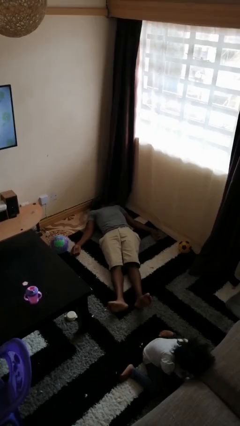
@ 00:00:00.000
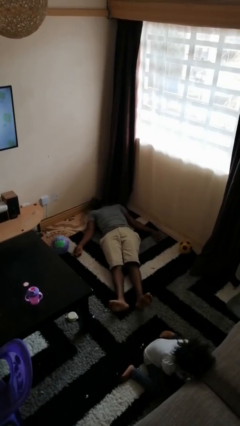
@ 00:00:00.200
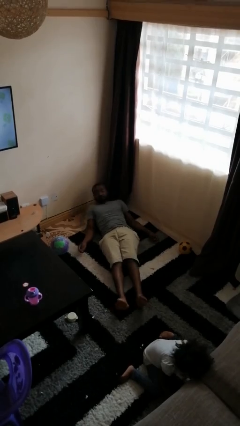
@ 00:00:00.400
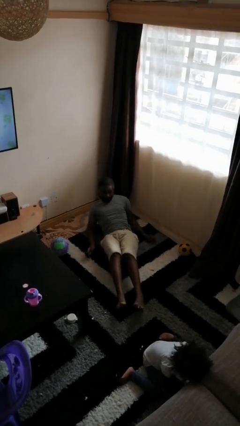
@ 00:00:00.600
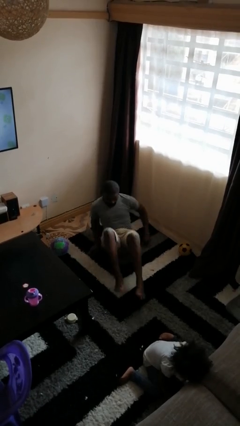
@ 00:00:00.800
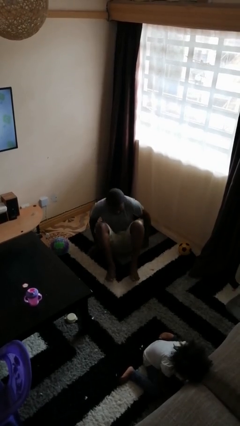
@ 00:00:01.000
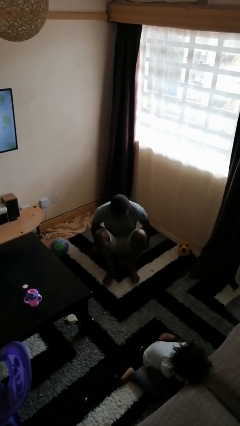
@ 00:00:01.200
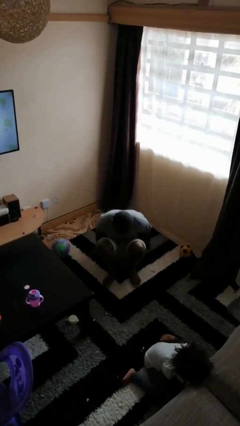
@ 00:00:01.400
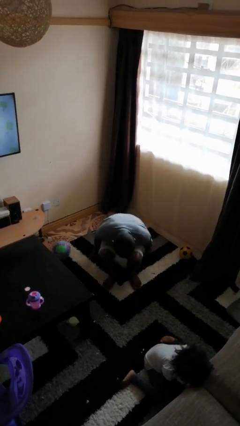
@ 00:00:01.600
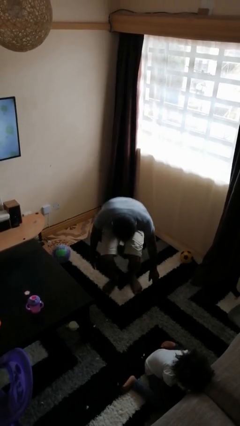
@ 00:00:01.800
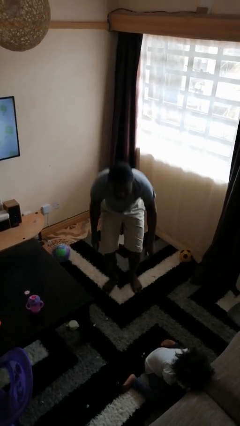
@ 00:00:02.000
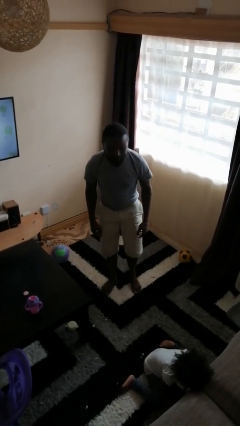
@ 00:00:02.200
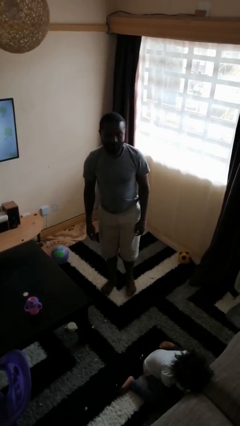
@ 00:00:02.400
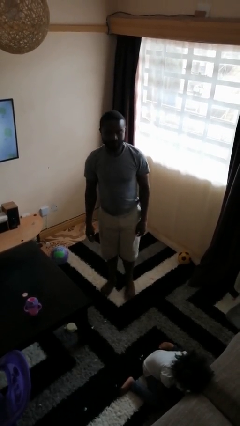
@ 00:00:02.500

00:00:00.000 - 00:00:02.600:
person stands up from floor

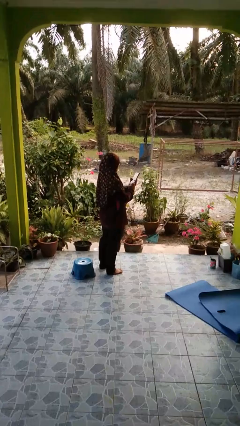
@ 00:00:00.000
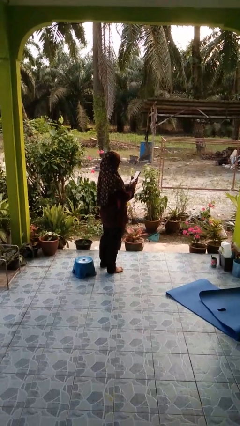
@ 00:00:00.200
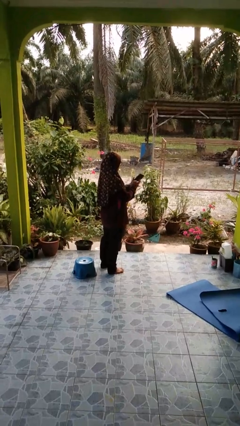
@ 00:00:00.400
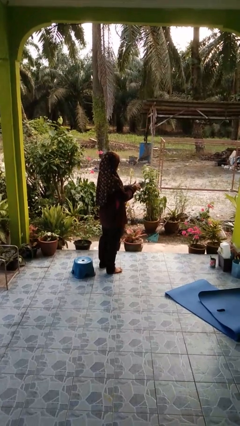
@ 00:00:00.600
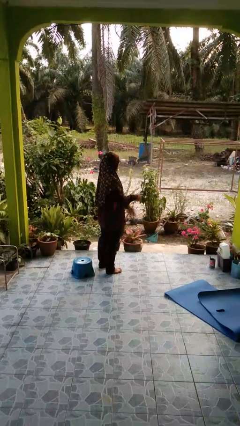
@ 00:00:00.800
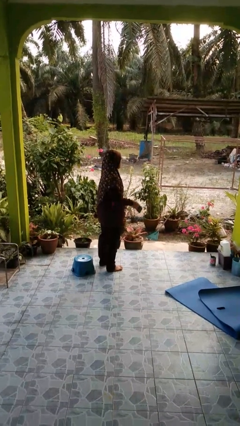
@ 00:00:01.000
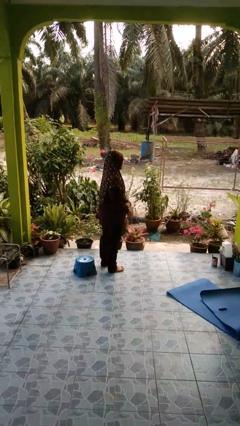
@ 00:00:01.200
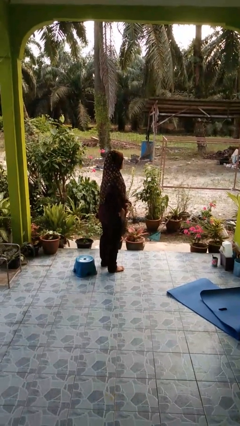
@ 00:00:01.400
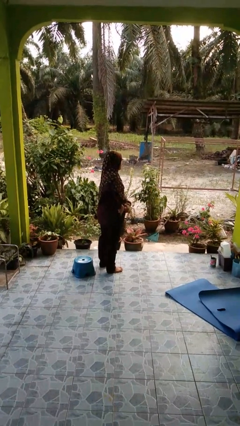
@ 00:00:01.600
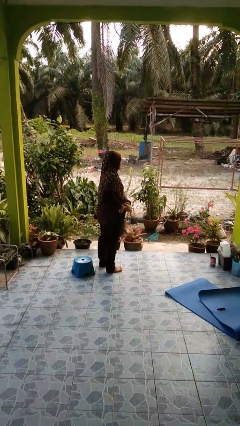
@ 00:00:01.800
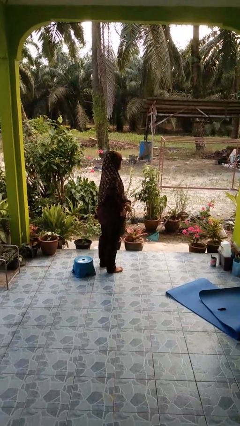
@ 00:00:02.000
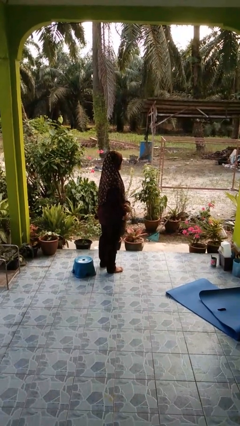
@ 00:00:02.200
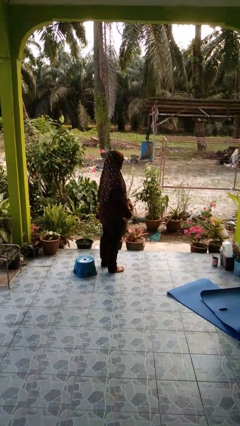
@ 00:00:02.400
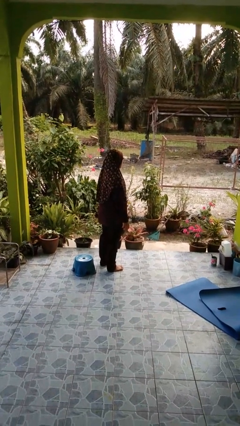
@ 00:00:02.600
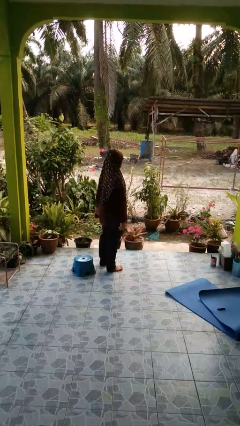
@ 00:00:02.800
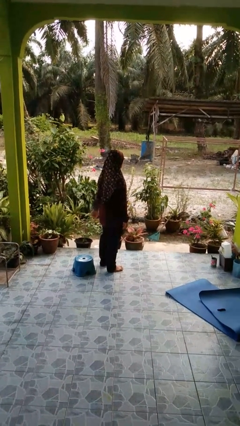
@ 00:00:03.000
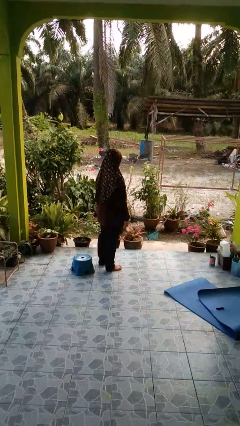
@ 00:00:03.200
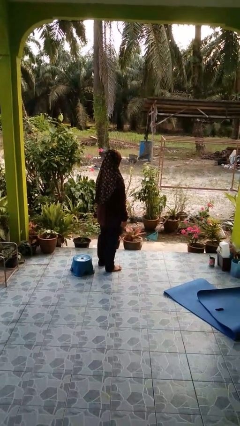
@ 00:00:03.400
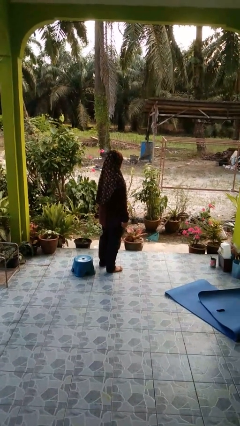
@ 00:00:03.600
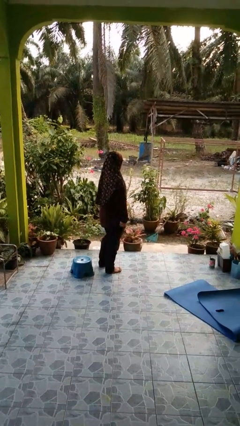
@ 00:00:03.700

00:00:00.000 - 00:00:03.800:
person puts phone into pocket

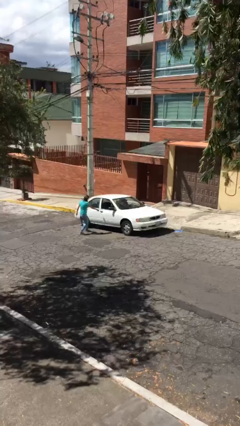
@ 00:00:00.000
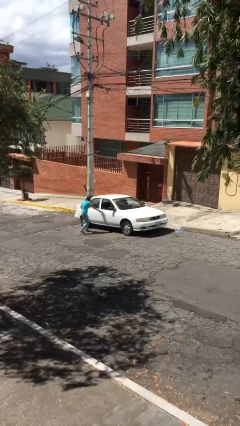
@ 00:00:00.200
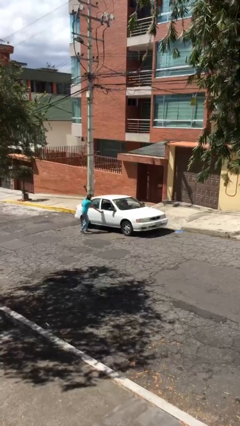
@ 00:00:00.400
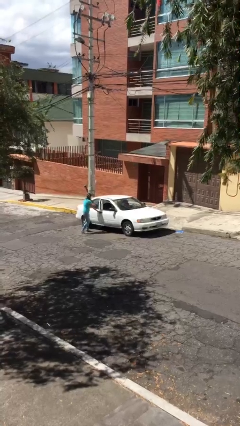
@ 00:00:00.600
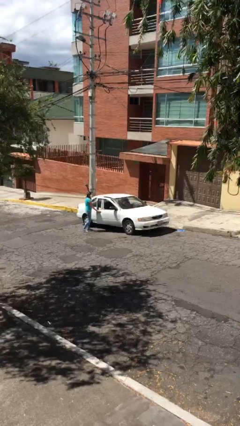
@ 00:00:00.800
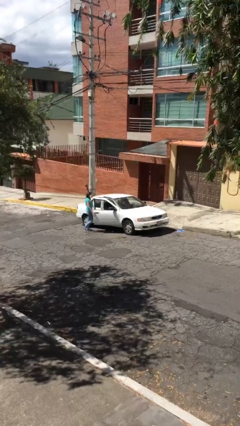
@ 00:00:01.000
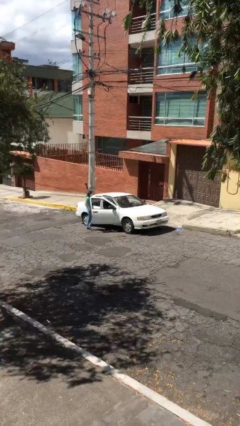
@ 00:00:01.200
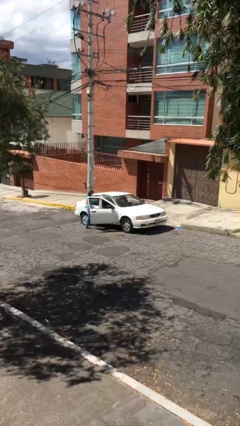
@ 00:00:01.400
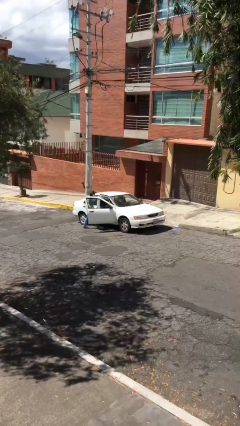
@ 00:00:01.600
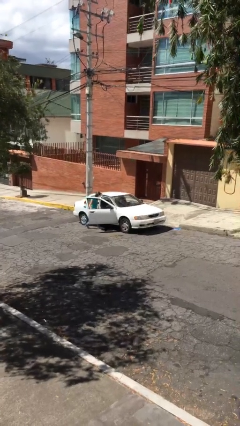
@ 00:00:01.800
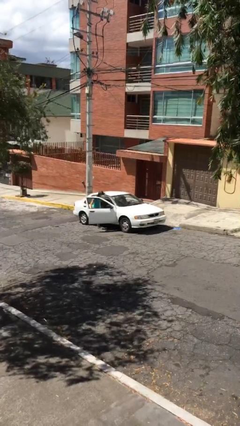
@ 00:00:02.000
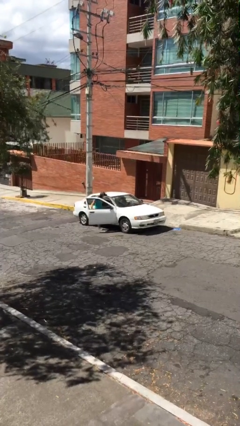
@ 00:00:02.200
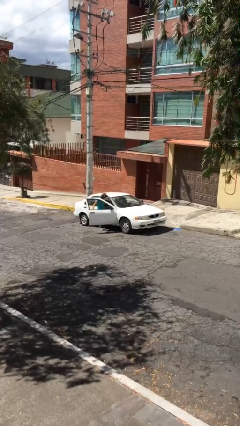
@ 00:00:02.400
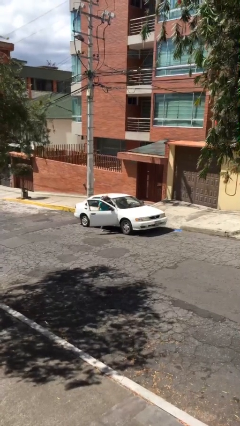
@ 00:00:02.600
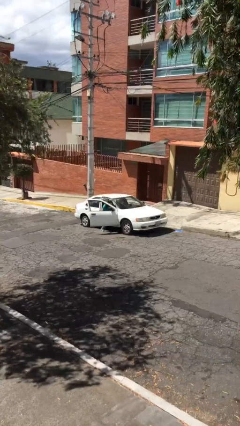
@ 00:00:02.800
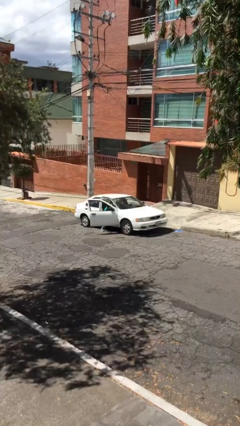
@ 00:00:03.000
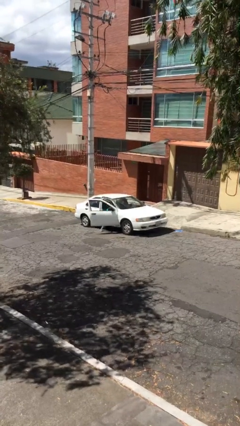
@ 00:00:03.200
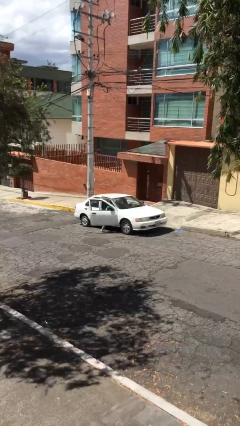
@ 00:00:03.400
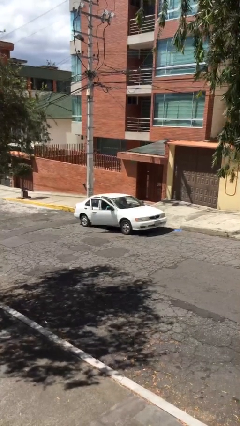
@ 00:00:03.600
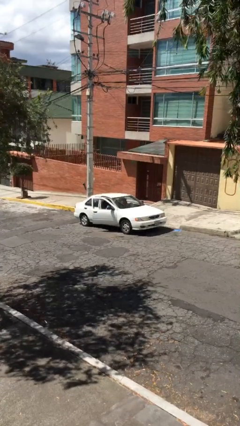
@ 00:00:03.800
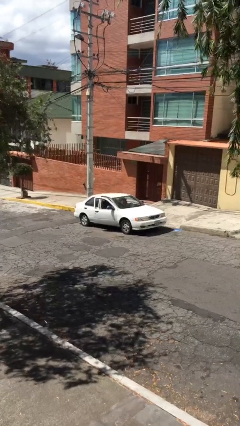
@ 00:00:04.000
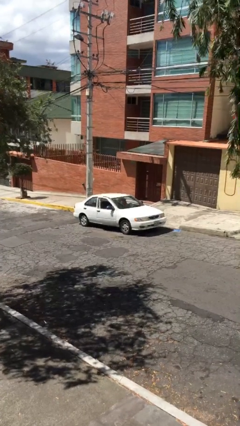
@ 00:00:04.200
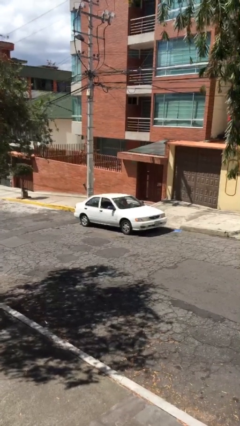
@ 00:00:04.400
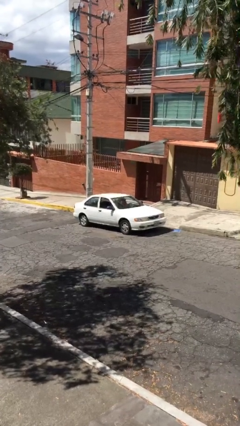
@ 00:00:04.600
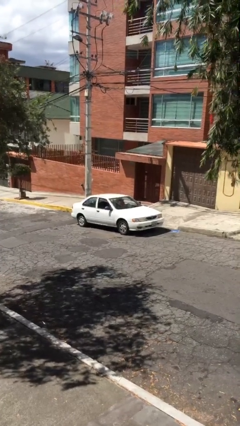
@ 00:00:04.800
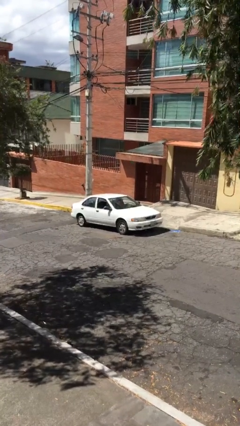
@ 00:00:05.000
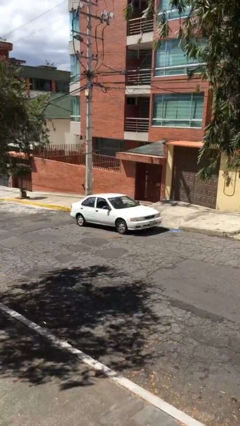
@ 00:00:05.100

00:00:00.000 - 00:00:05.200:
car picks up person

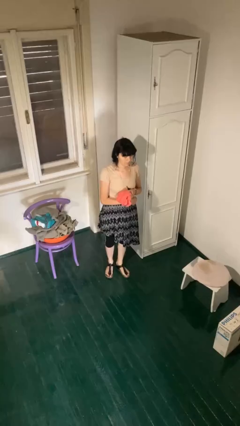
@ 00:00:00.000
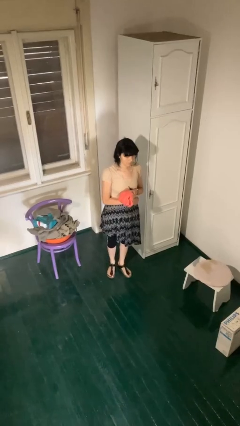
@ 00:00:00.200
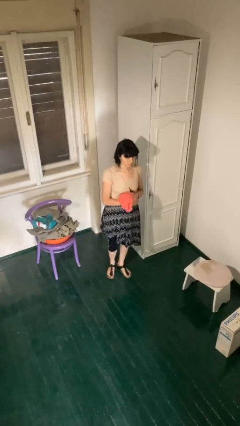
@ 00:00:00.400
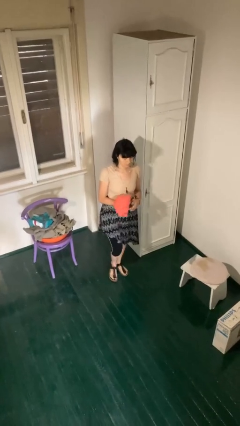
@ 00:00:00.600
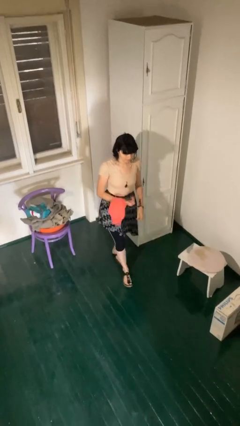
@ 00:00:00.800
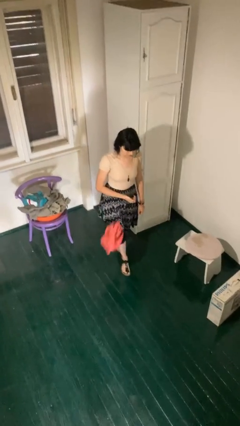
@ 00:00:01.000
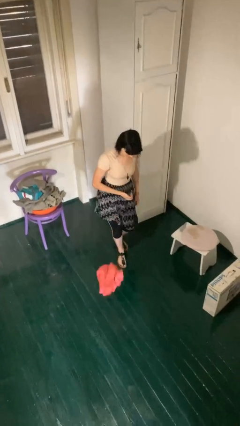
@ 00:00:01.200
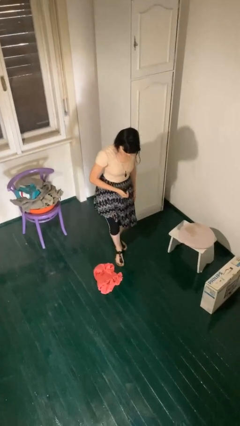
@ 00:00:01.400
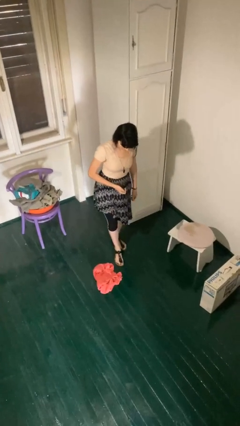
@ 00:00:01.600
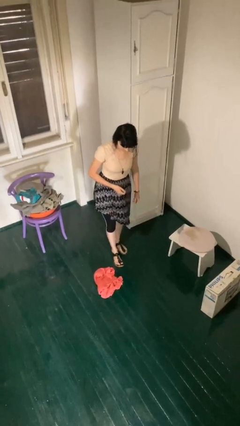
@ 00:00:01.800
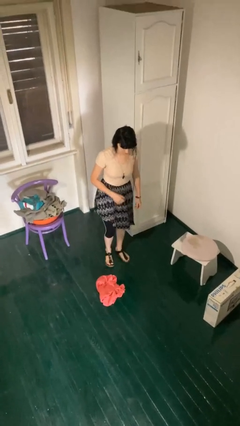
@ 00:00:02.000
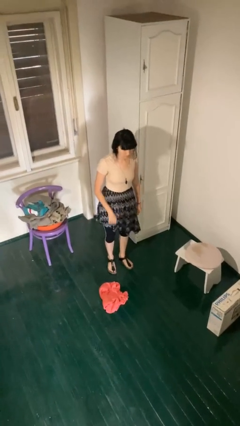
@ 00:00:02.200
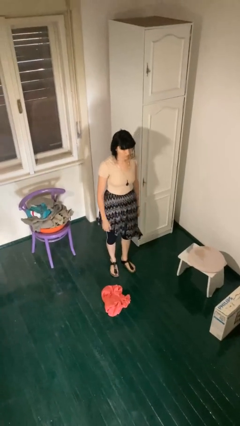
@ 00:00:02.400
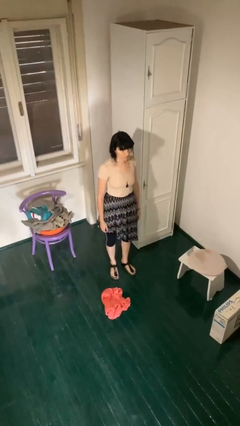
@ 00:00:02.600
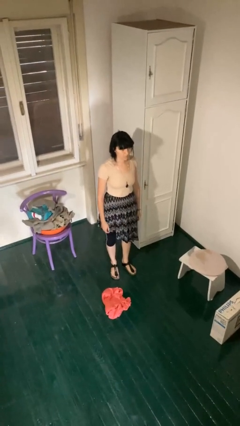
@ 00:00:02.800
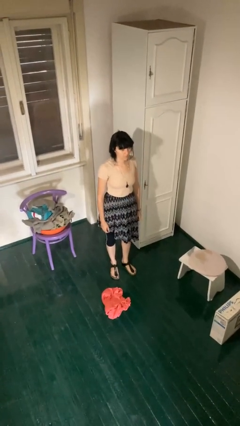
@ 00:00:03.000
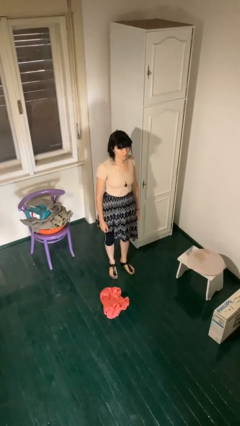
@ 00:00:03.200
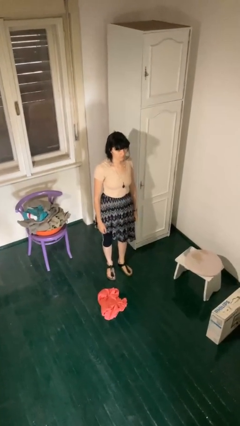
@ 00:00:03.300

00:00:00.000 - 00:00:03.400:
person drops object

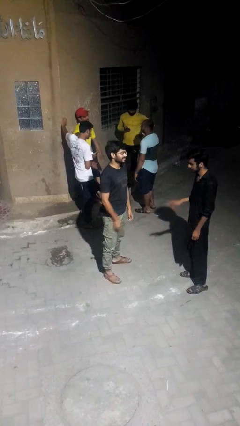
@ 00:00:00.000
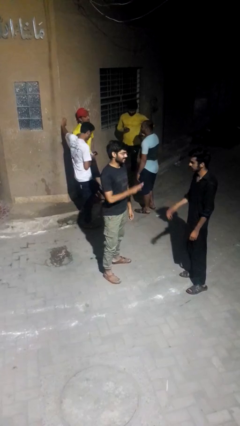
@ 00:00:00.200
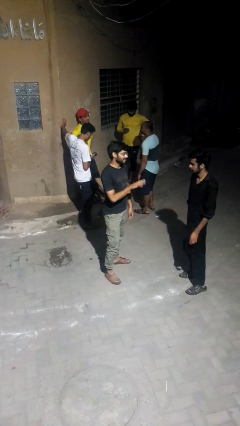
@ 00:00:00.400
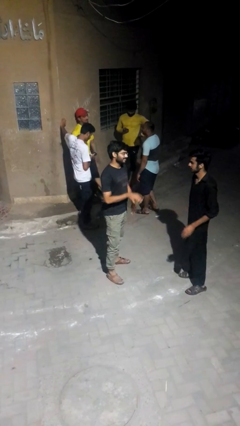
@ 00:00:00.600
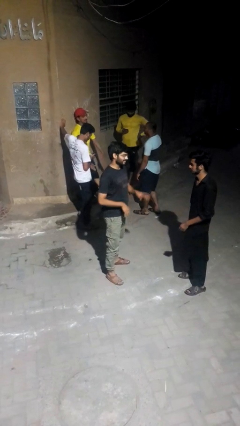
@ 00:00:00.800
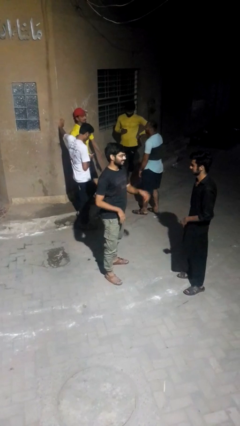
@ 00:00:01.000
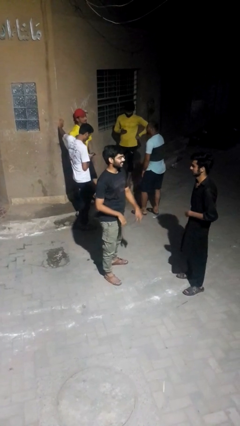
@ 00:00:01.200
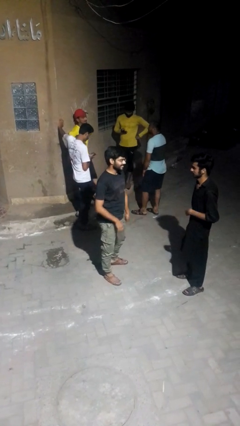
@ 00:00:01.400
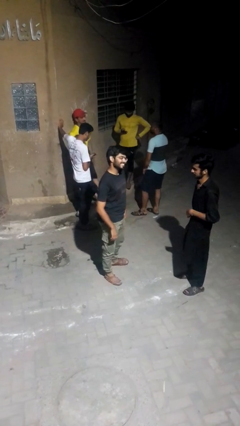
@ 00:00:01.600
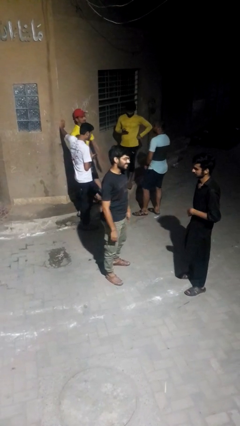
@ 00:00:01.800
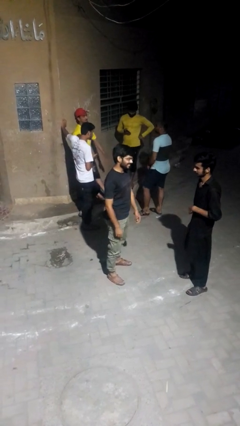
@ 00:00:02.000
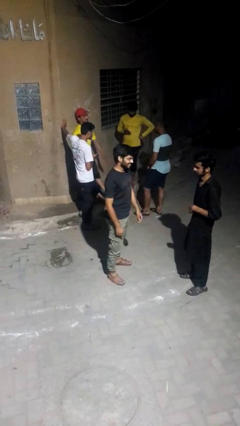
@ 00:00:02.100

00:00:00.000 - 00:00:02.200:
person talks to person
